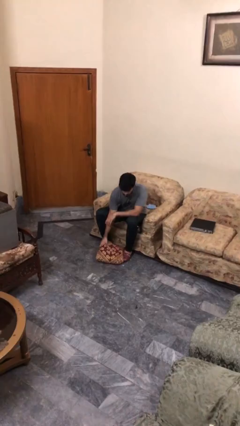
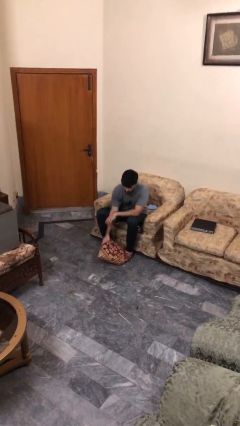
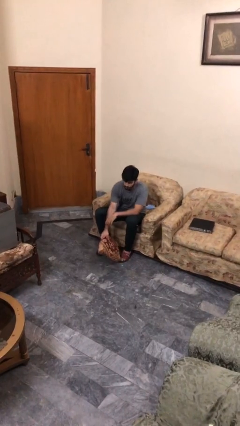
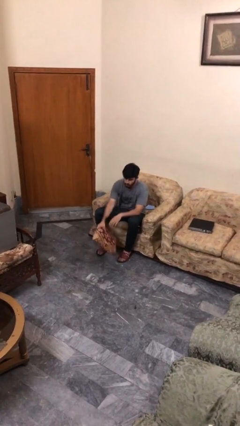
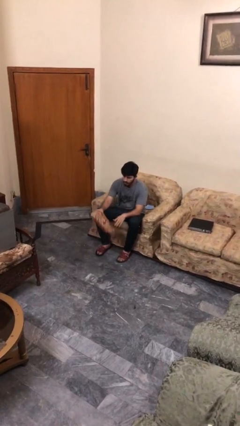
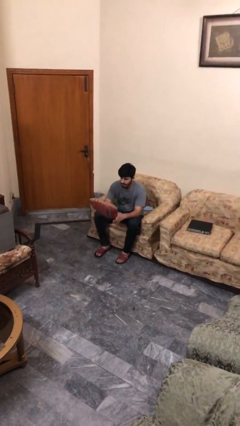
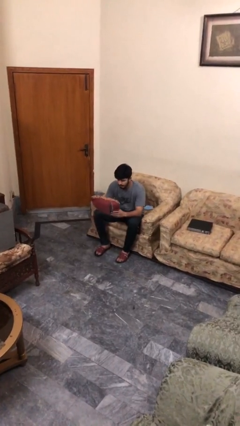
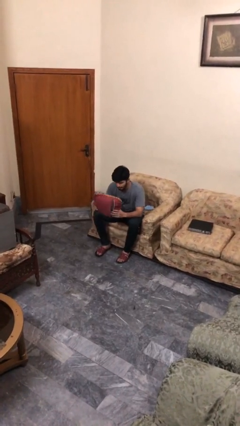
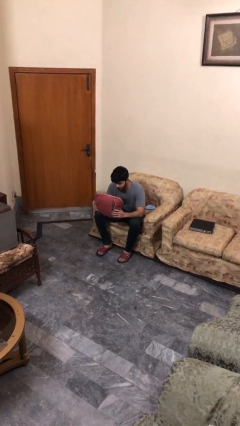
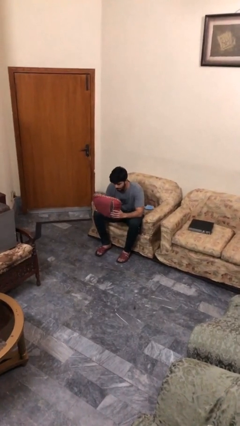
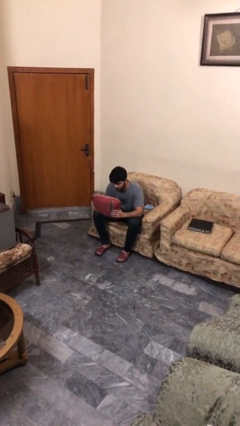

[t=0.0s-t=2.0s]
person picks up object from floor

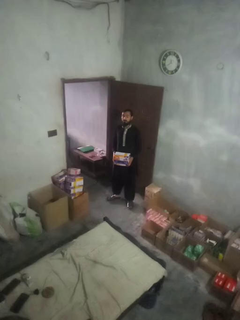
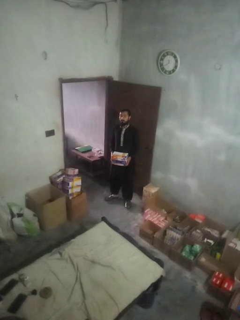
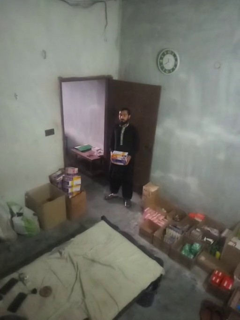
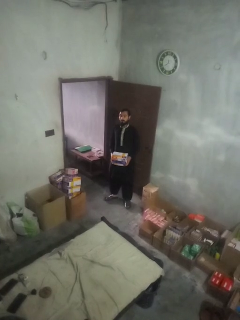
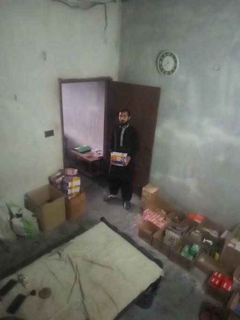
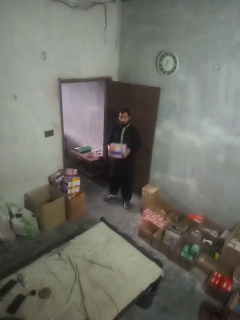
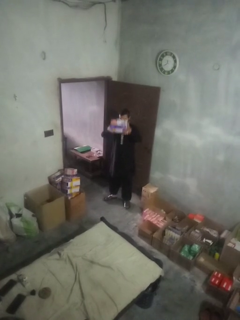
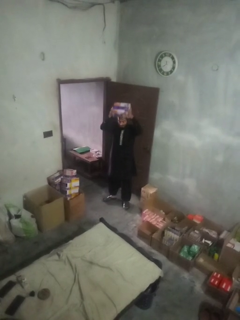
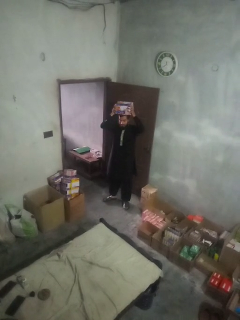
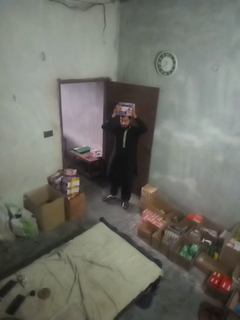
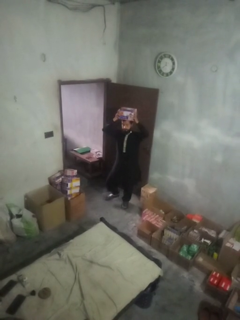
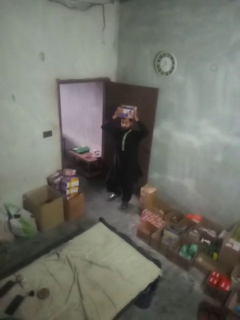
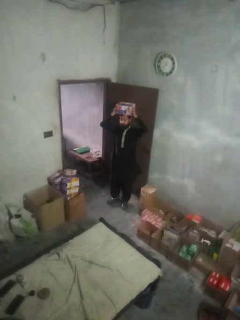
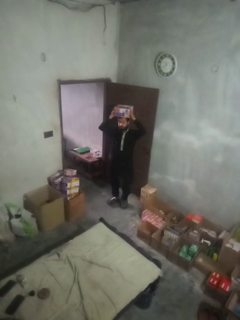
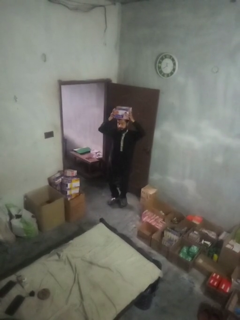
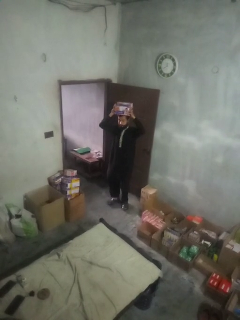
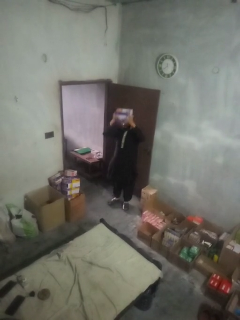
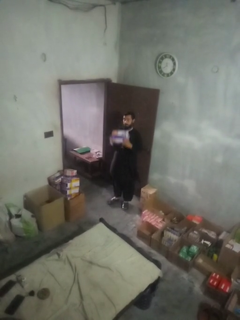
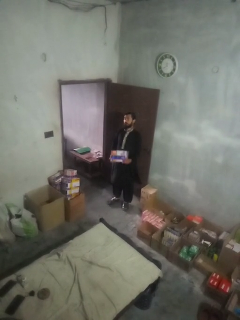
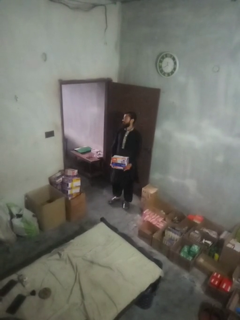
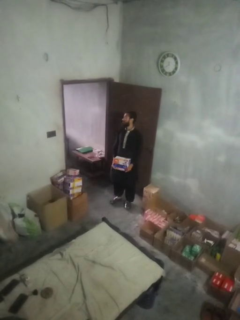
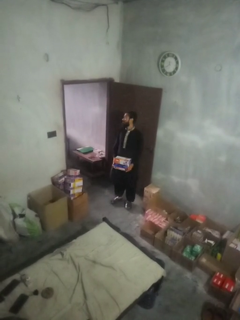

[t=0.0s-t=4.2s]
person holds object above head

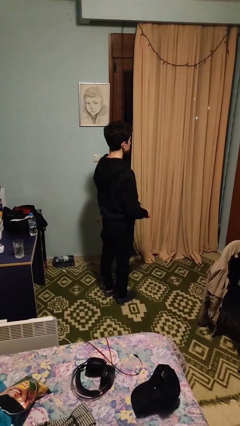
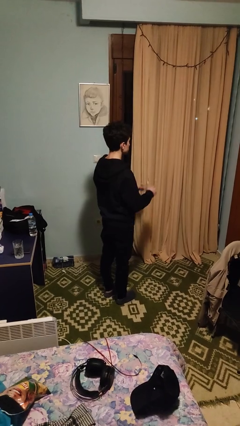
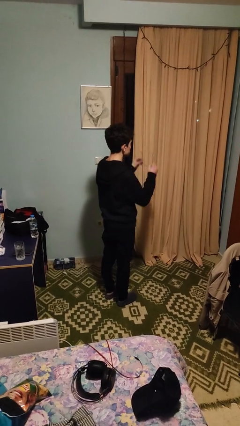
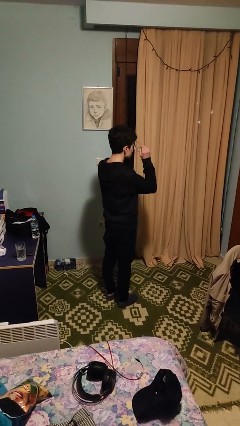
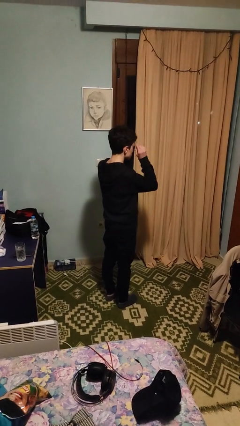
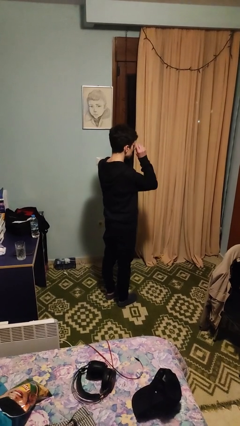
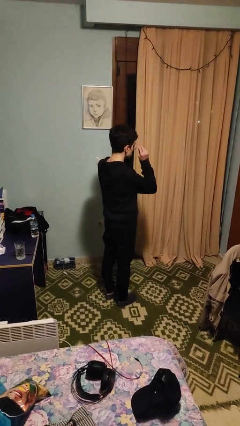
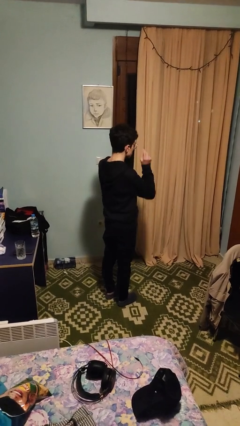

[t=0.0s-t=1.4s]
person puts on glasses

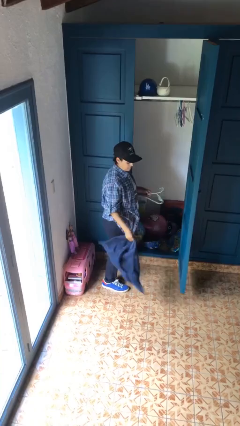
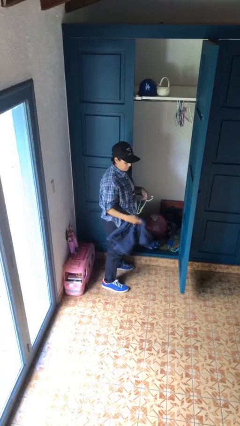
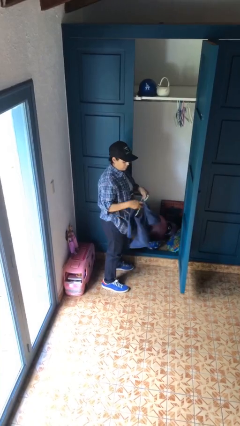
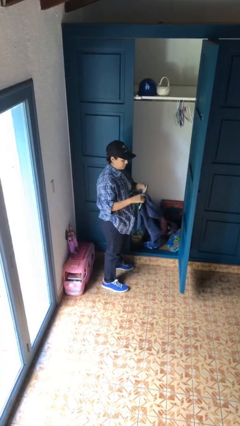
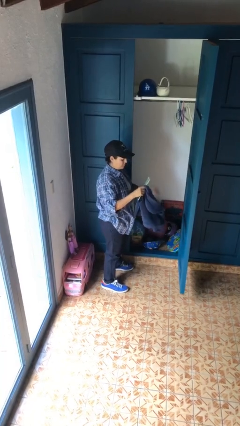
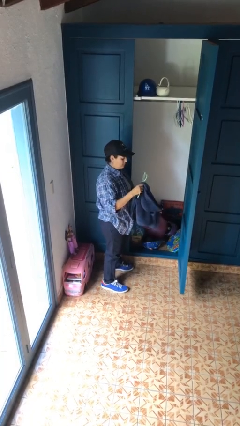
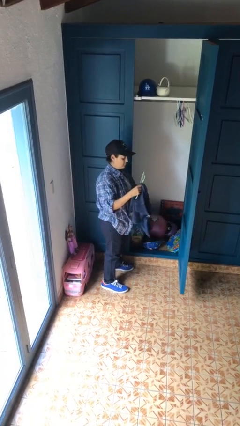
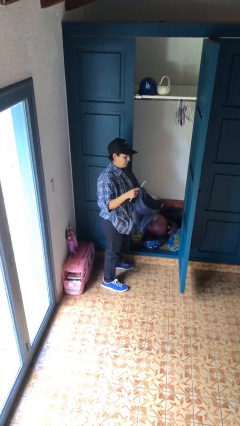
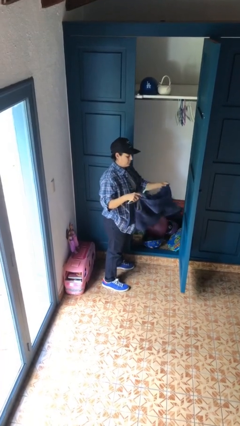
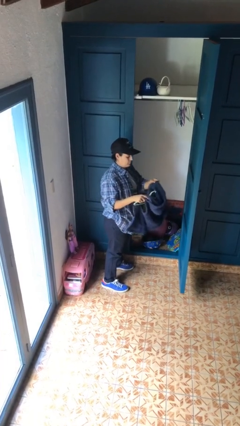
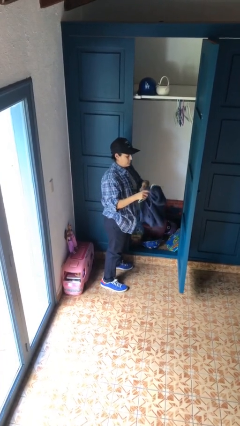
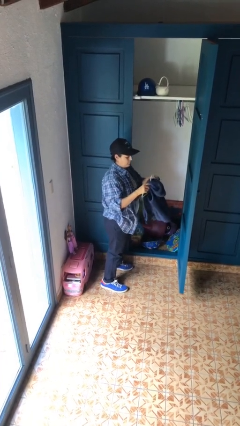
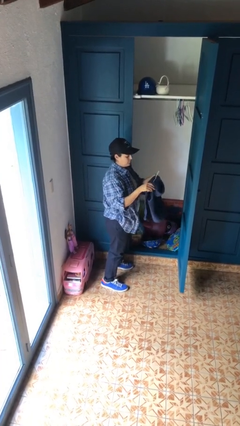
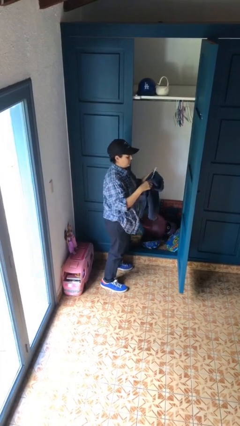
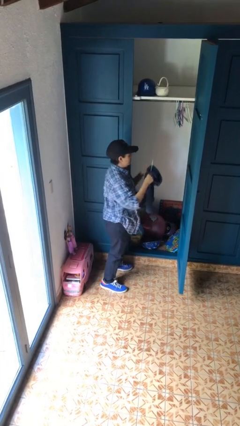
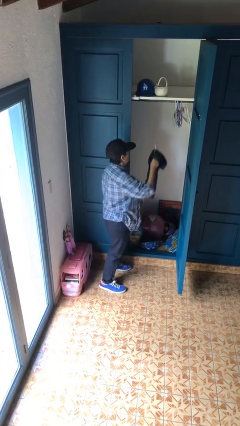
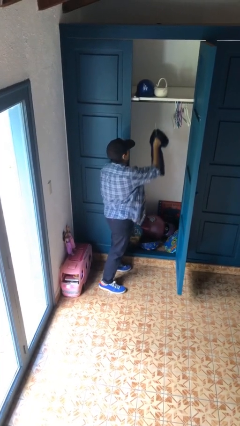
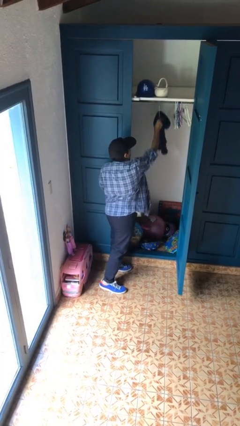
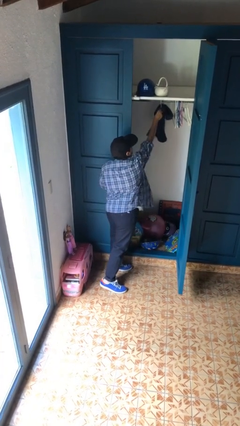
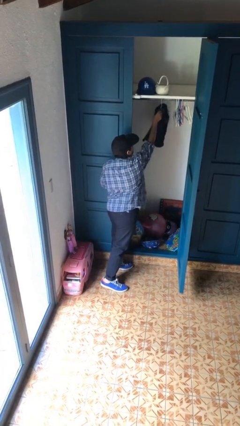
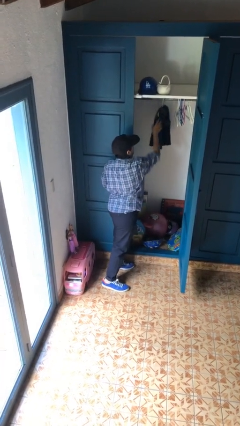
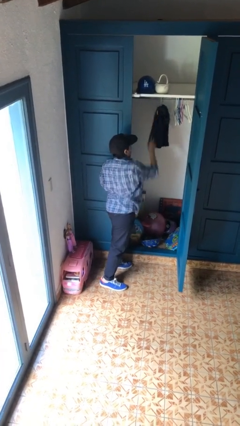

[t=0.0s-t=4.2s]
person puts clothes into closet

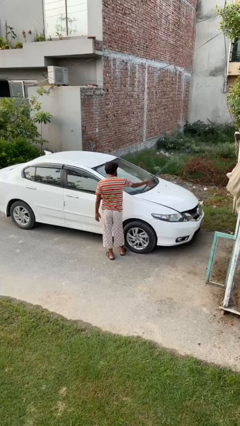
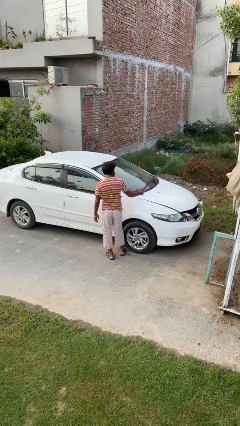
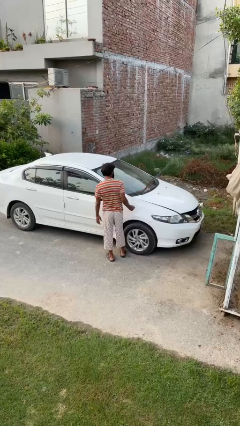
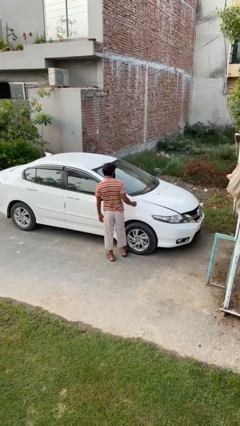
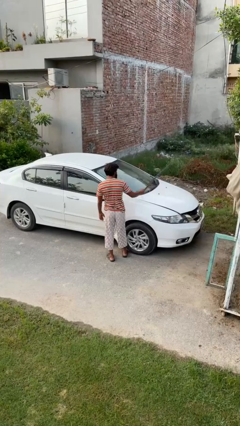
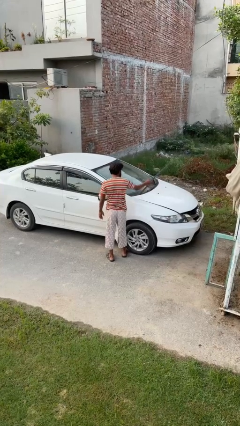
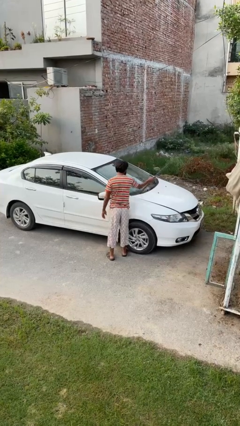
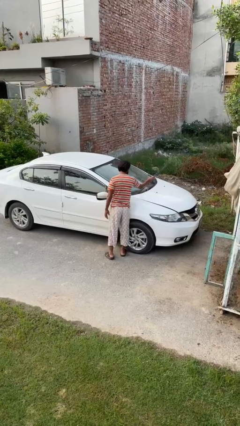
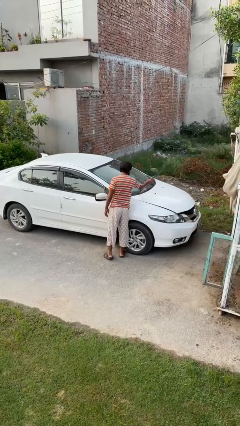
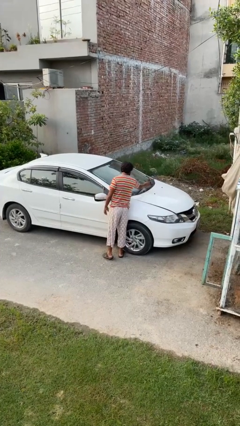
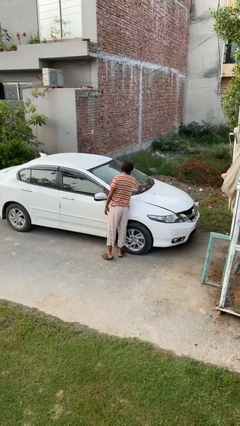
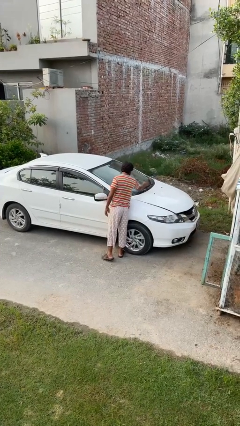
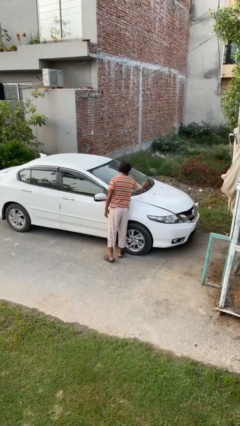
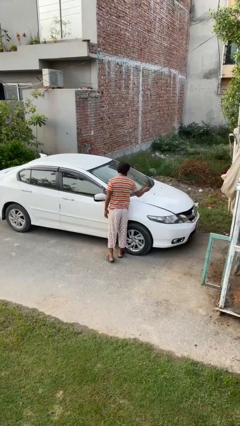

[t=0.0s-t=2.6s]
person flips down car wipers

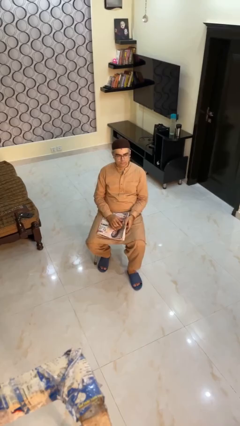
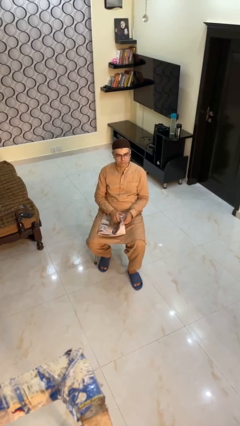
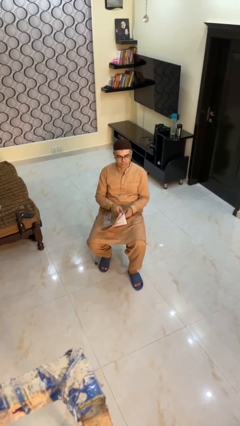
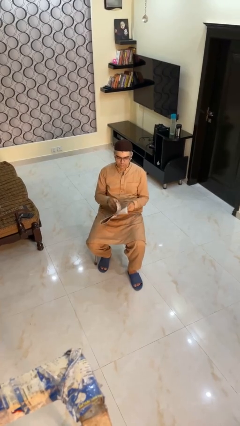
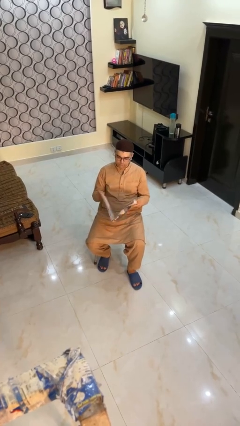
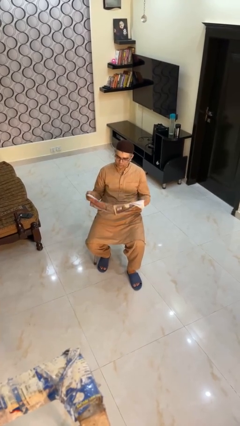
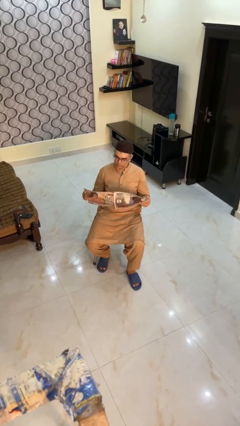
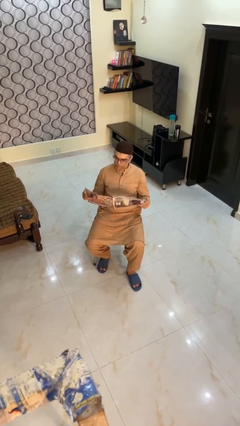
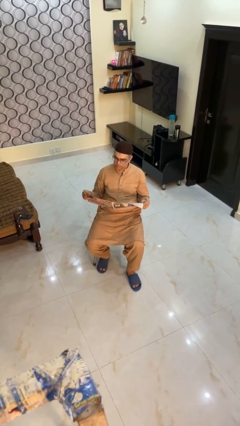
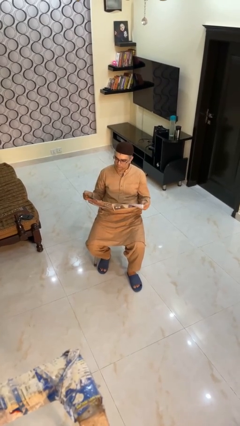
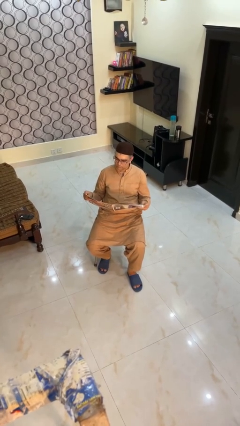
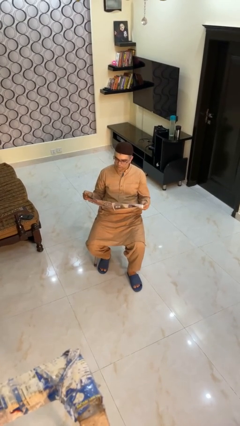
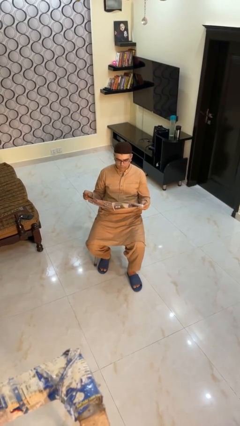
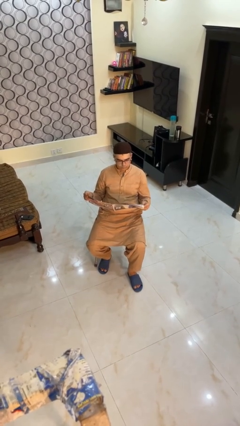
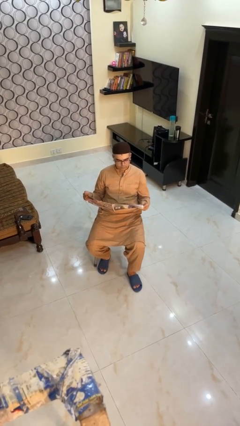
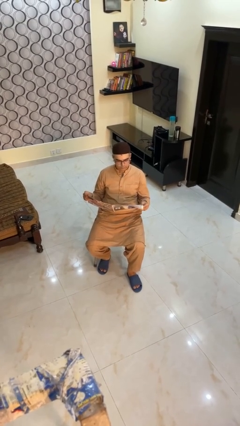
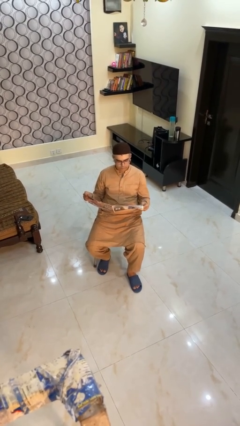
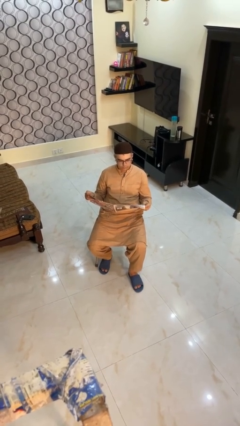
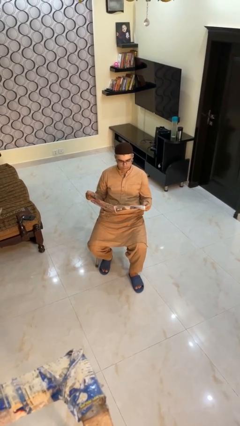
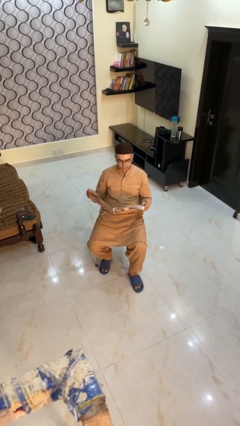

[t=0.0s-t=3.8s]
person reads magazine
